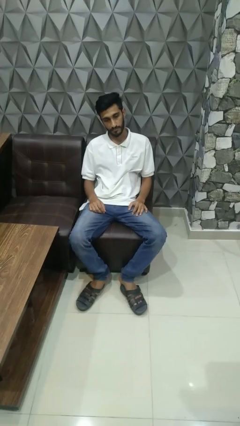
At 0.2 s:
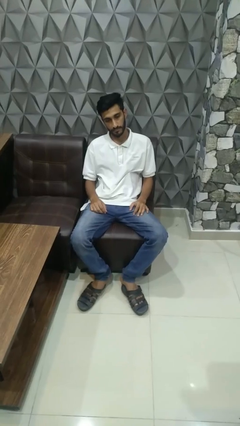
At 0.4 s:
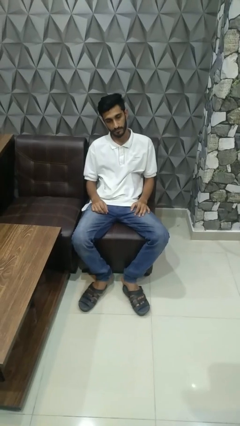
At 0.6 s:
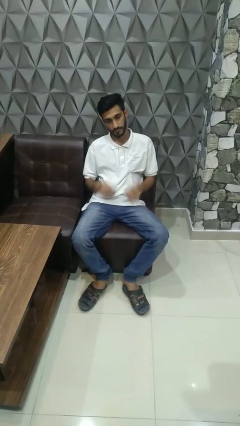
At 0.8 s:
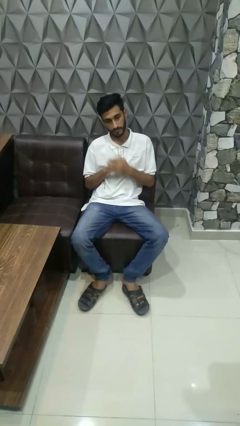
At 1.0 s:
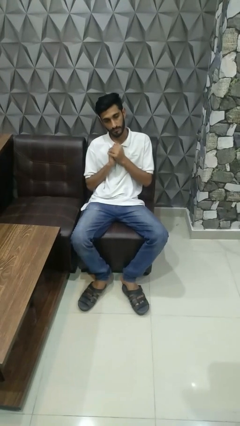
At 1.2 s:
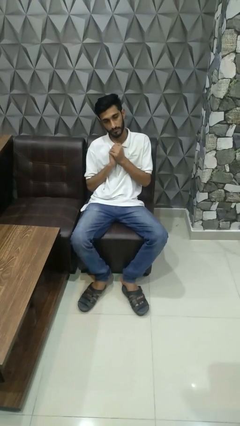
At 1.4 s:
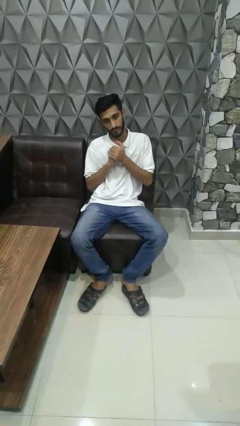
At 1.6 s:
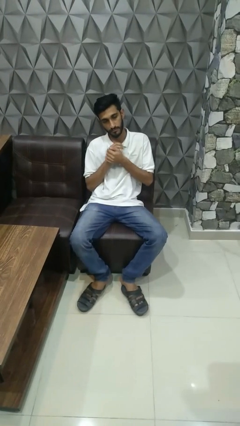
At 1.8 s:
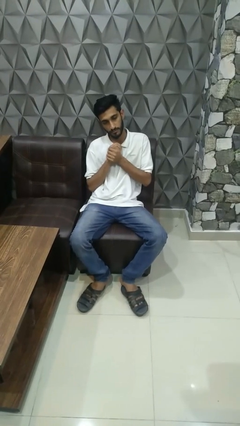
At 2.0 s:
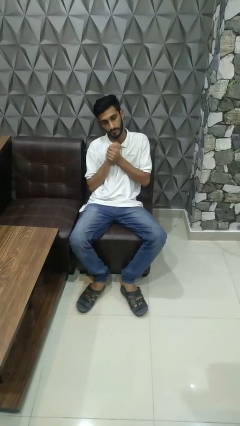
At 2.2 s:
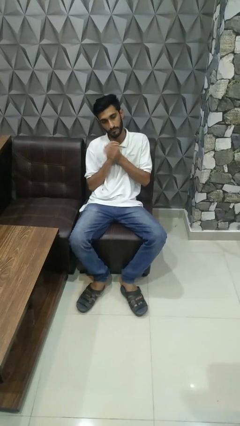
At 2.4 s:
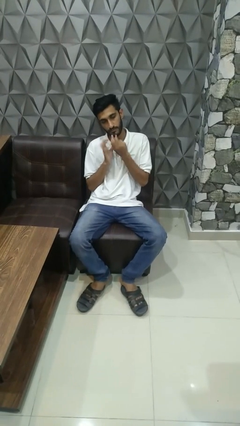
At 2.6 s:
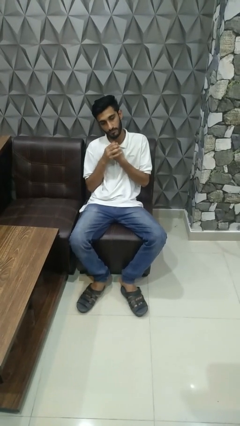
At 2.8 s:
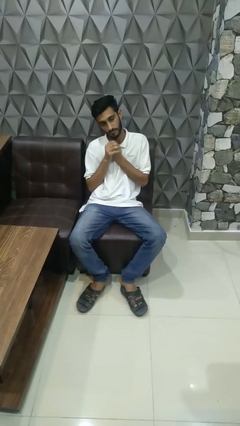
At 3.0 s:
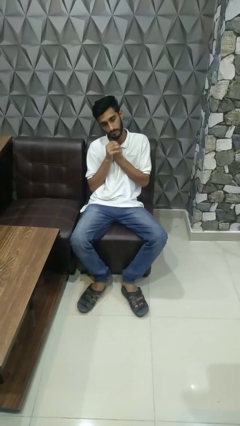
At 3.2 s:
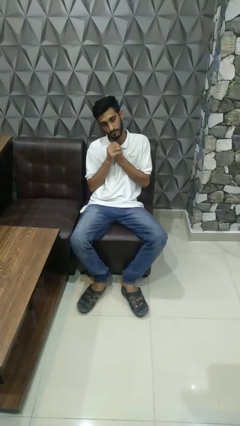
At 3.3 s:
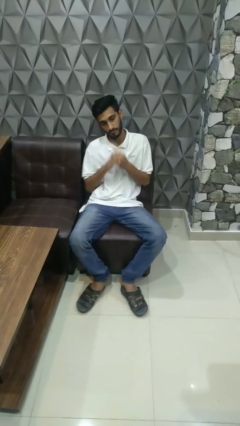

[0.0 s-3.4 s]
person cracks knuckles

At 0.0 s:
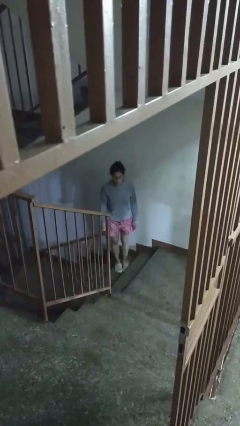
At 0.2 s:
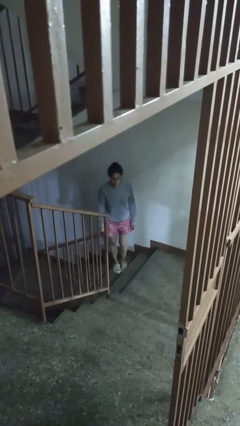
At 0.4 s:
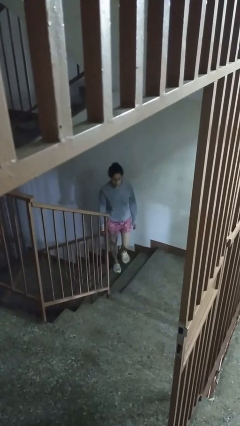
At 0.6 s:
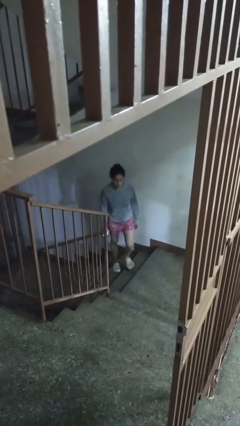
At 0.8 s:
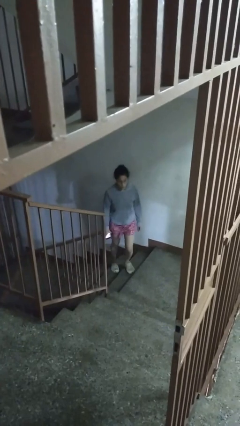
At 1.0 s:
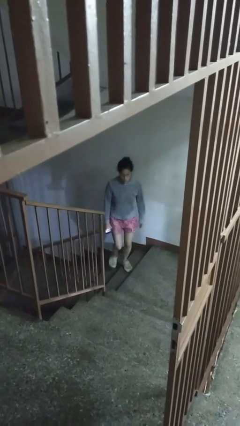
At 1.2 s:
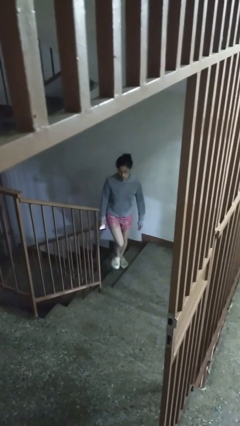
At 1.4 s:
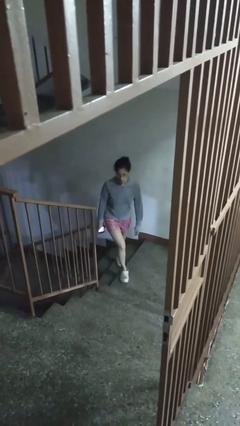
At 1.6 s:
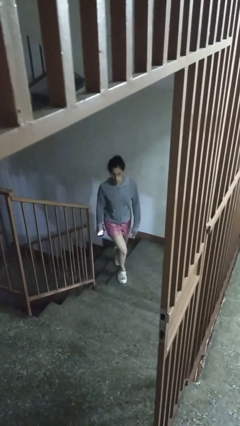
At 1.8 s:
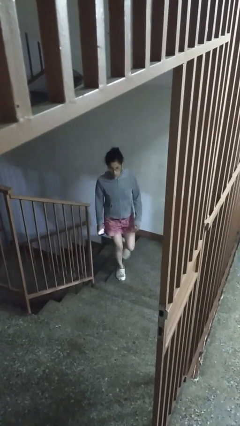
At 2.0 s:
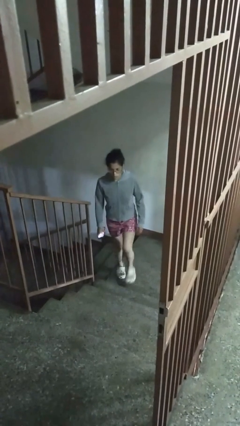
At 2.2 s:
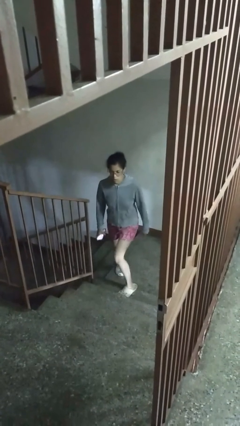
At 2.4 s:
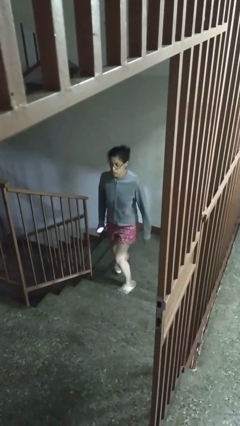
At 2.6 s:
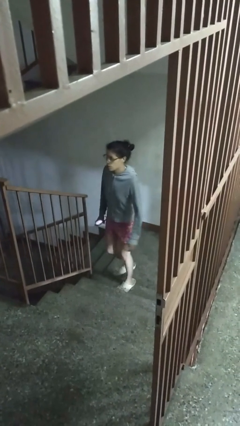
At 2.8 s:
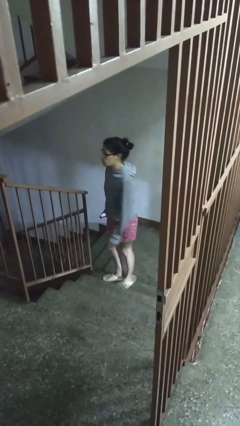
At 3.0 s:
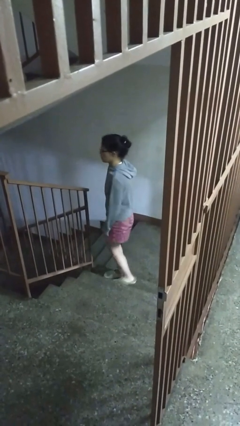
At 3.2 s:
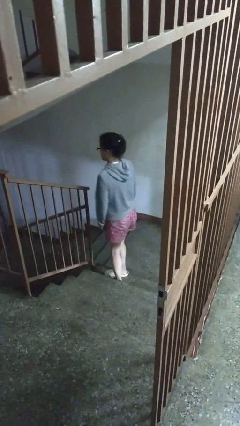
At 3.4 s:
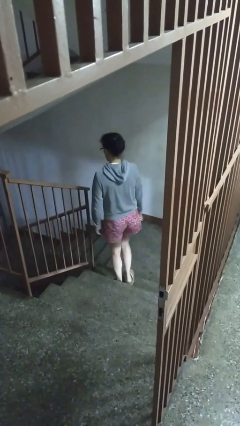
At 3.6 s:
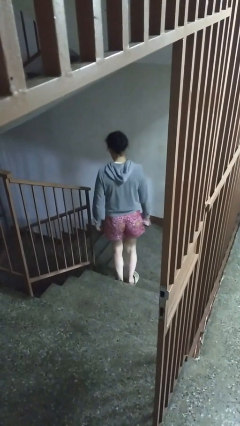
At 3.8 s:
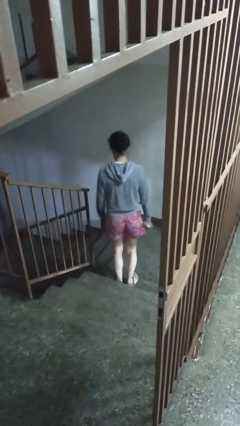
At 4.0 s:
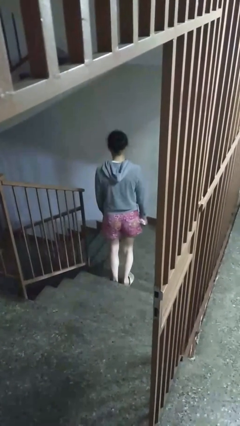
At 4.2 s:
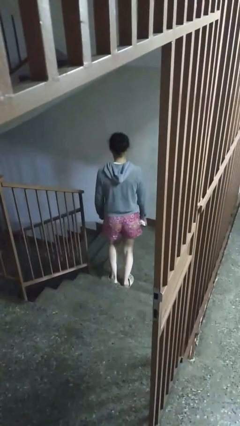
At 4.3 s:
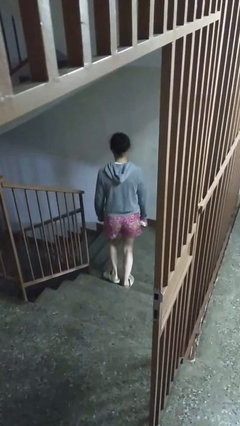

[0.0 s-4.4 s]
person climbs up stairs

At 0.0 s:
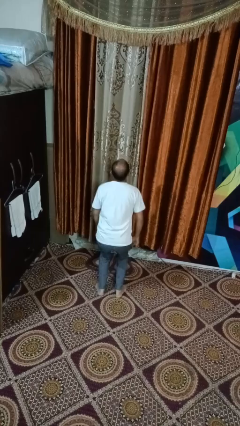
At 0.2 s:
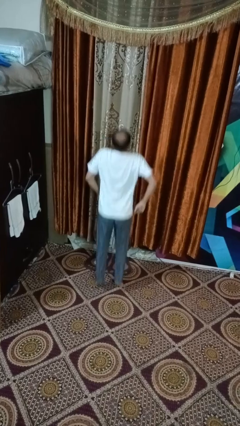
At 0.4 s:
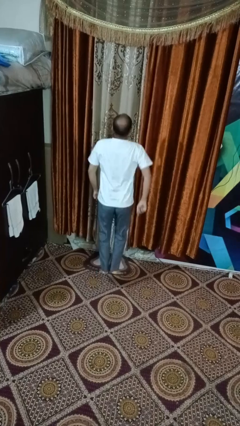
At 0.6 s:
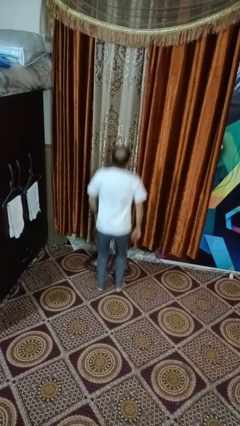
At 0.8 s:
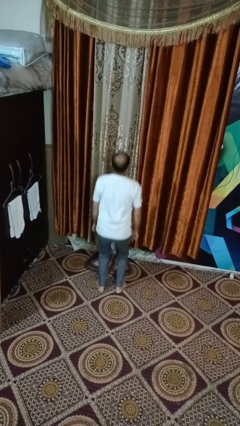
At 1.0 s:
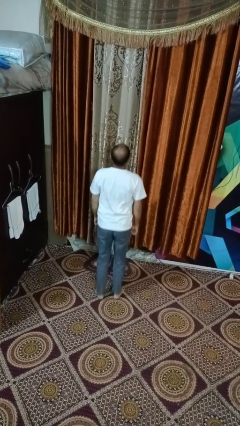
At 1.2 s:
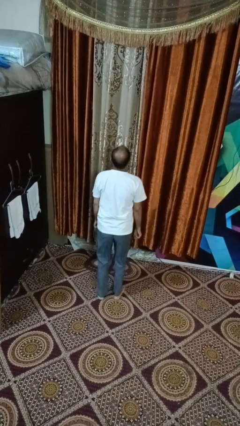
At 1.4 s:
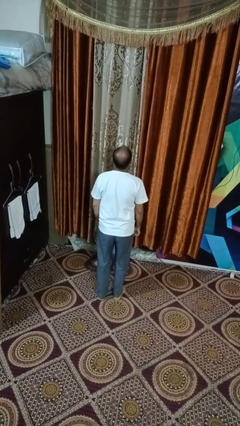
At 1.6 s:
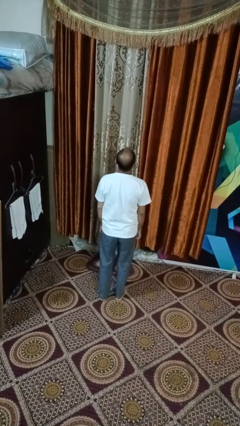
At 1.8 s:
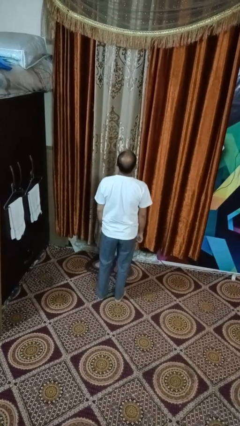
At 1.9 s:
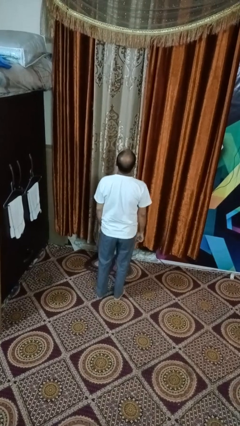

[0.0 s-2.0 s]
person jumps

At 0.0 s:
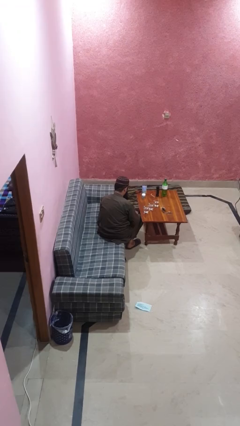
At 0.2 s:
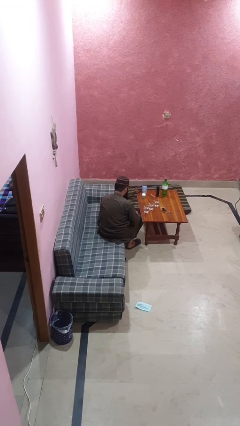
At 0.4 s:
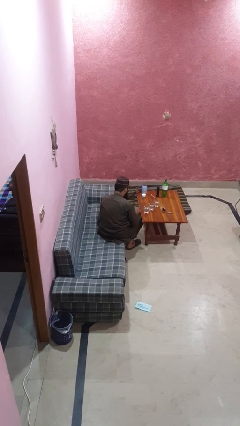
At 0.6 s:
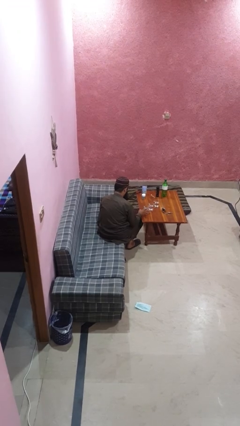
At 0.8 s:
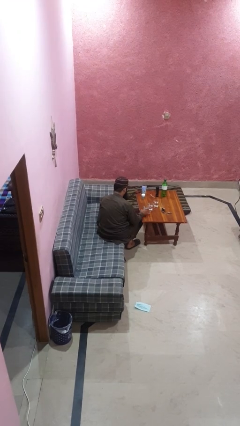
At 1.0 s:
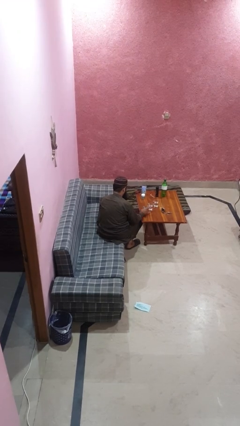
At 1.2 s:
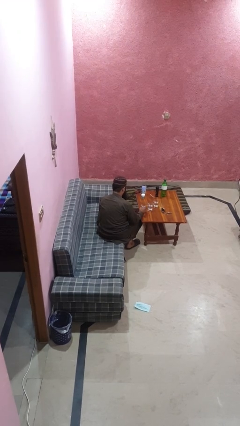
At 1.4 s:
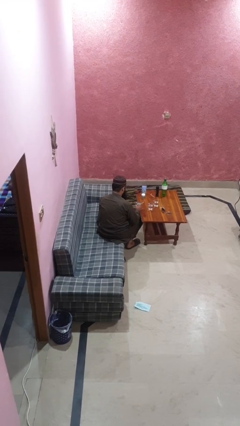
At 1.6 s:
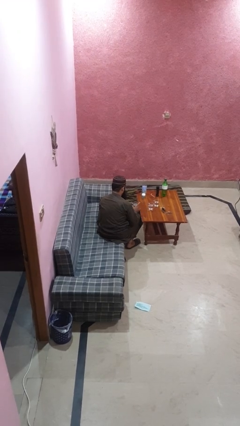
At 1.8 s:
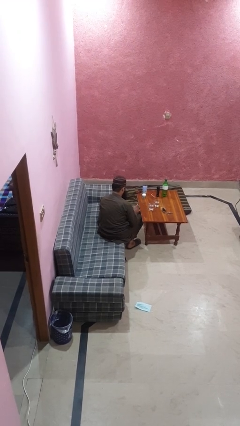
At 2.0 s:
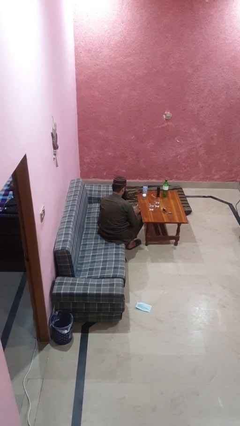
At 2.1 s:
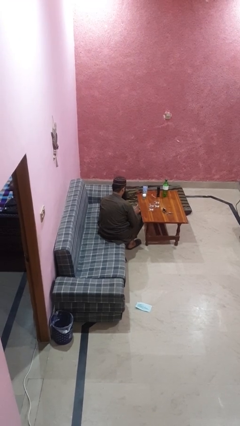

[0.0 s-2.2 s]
person picks up object from table

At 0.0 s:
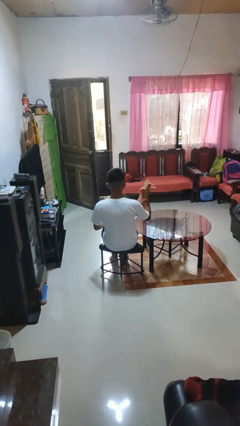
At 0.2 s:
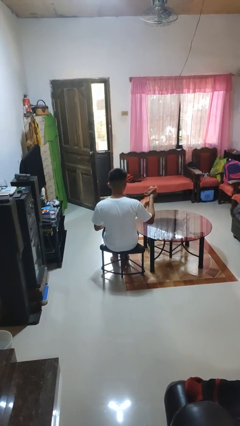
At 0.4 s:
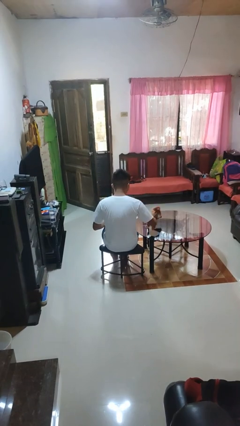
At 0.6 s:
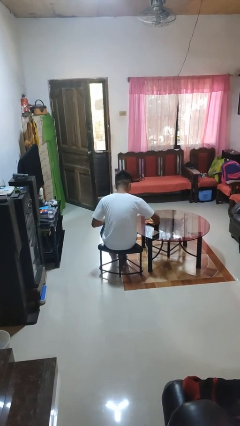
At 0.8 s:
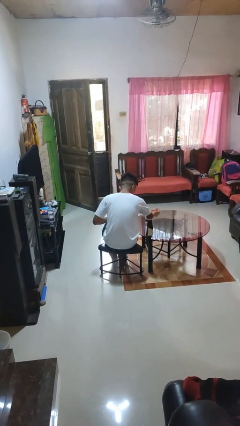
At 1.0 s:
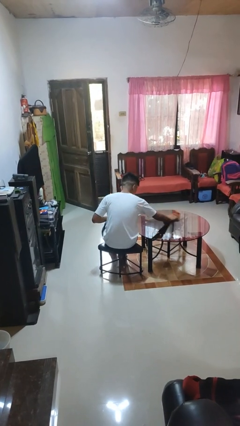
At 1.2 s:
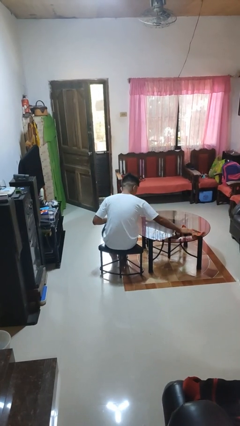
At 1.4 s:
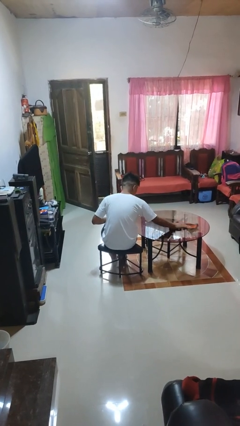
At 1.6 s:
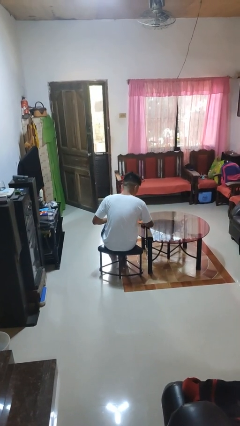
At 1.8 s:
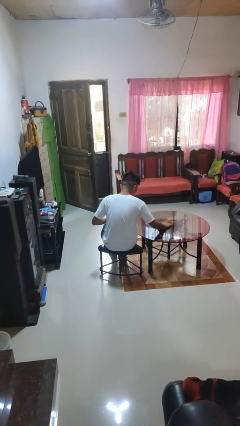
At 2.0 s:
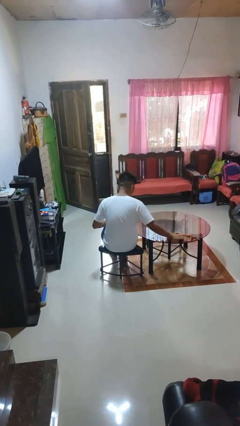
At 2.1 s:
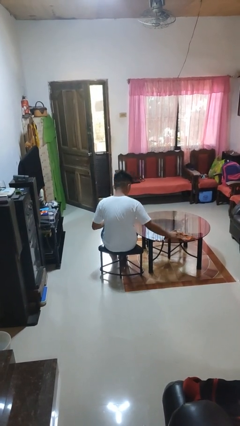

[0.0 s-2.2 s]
person cleans table with rag

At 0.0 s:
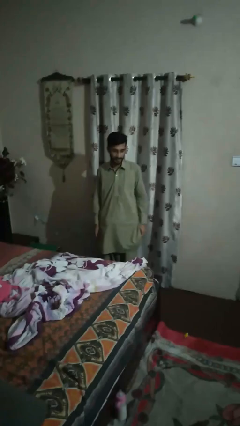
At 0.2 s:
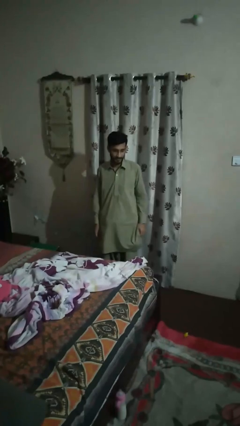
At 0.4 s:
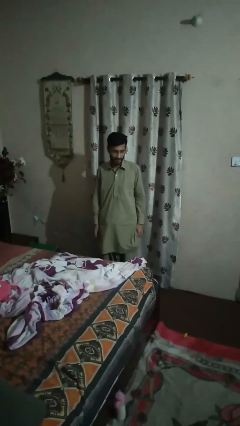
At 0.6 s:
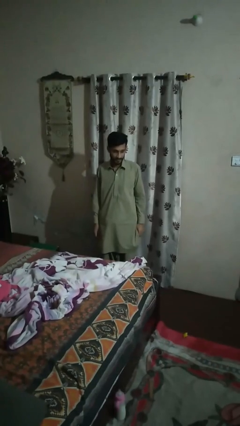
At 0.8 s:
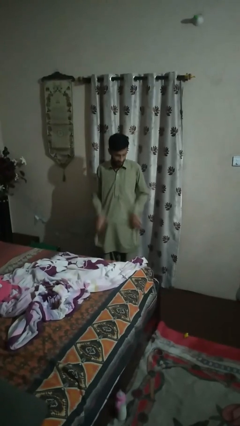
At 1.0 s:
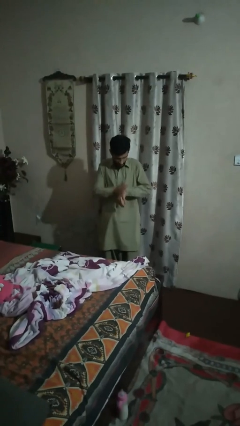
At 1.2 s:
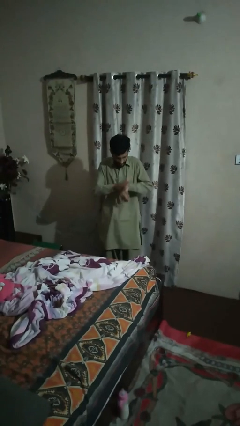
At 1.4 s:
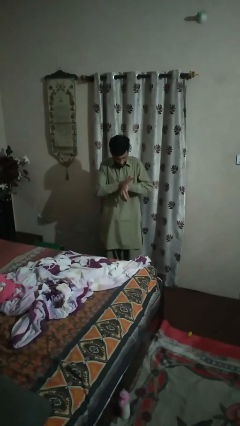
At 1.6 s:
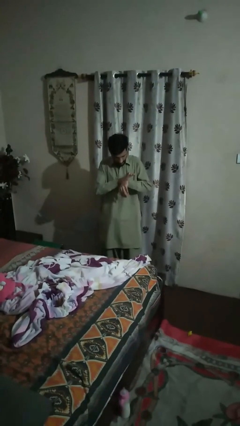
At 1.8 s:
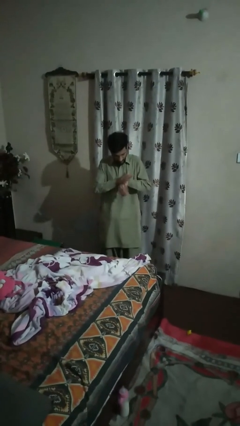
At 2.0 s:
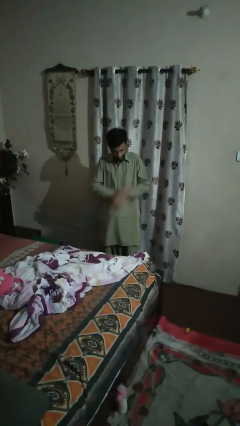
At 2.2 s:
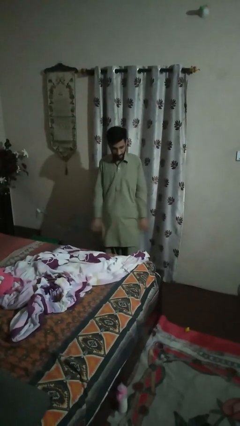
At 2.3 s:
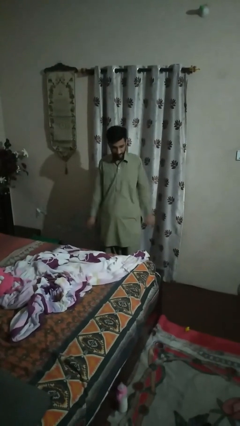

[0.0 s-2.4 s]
person swats bug

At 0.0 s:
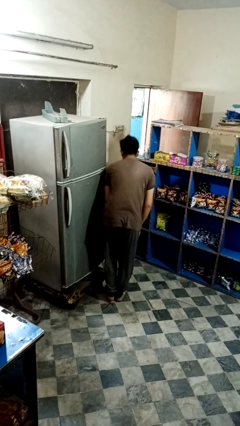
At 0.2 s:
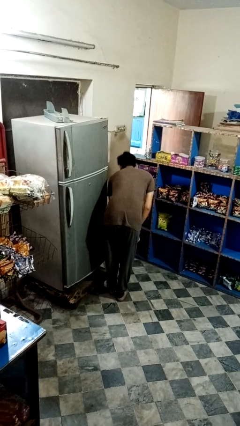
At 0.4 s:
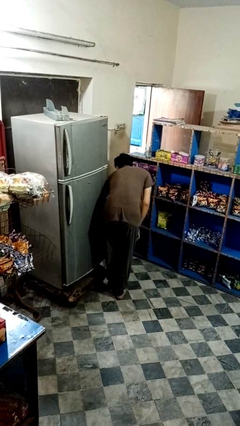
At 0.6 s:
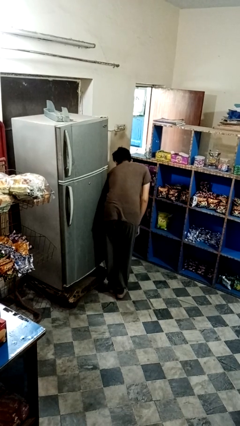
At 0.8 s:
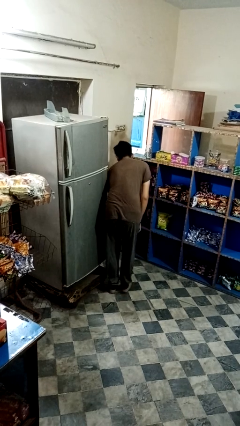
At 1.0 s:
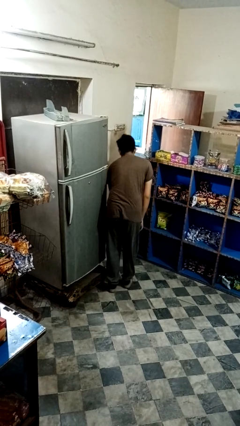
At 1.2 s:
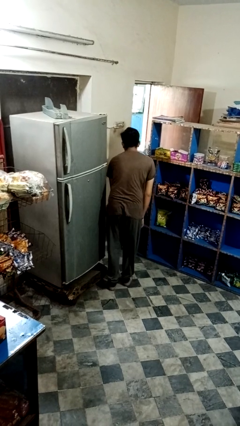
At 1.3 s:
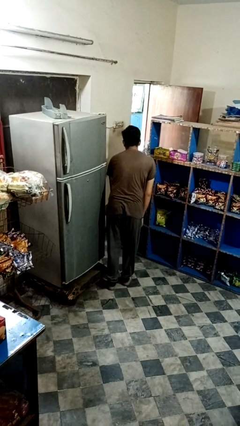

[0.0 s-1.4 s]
person stubs toe
